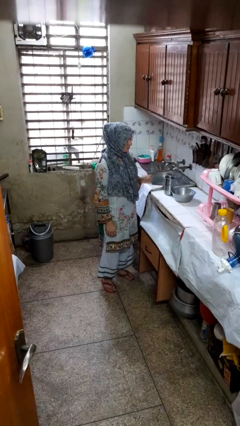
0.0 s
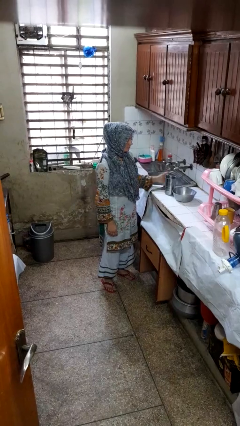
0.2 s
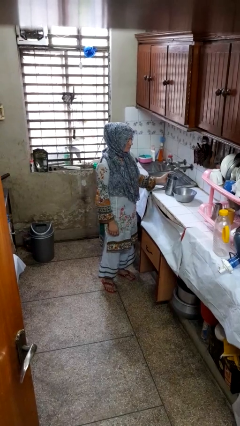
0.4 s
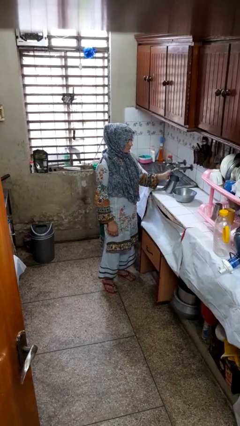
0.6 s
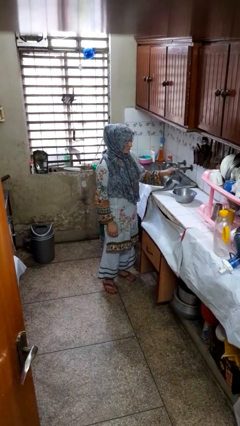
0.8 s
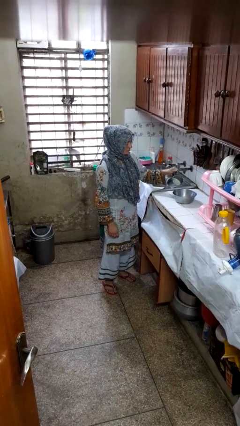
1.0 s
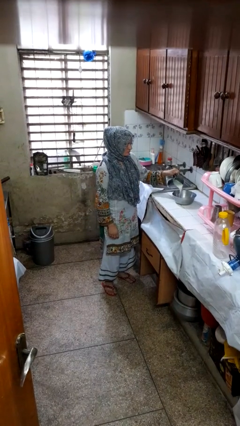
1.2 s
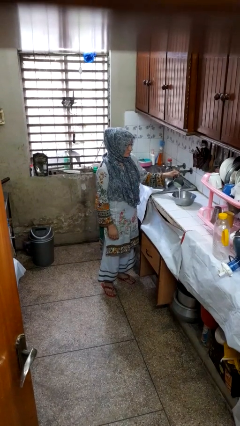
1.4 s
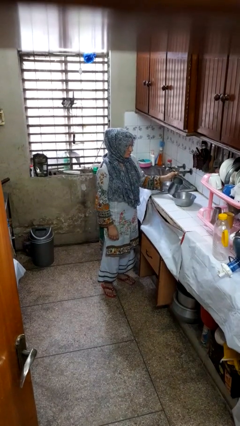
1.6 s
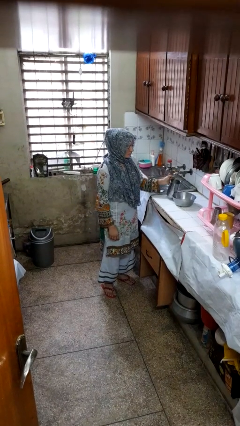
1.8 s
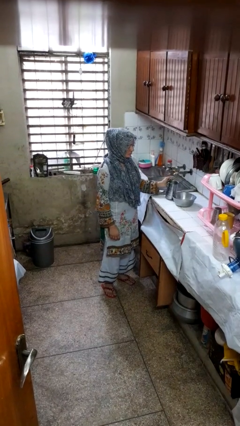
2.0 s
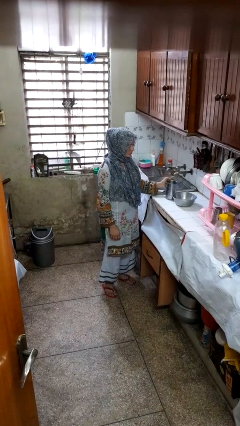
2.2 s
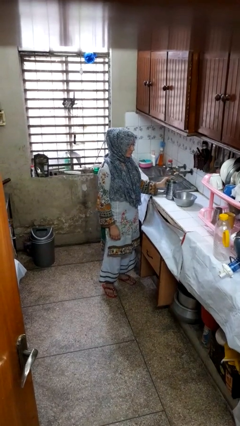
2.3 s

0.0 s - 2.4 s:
person pours into bowl

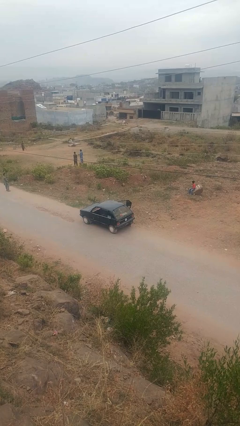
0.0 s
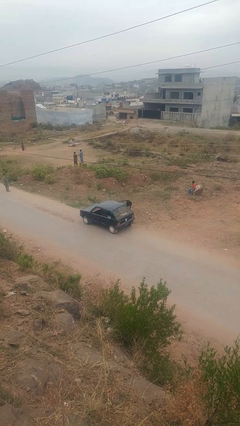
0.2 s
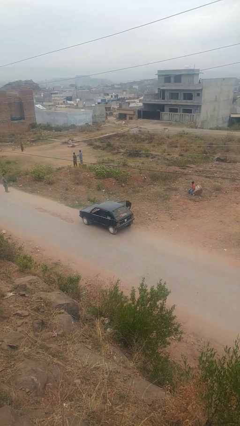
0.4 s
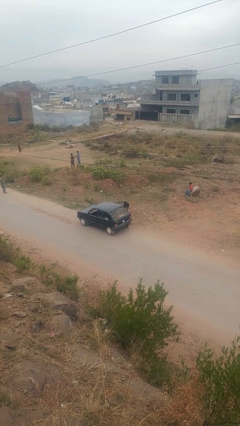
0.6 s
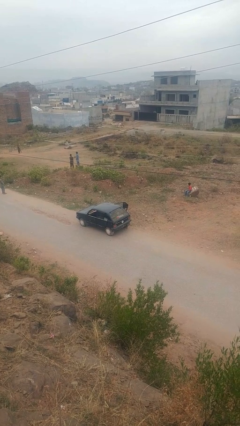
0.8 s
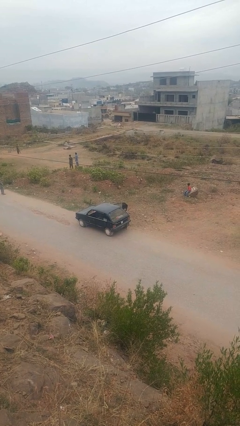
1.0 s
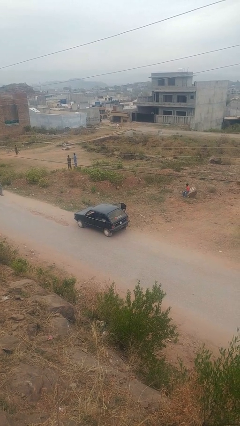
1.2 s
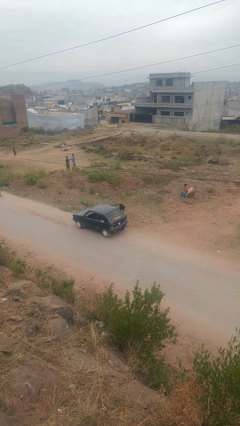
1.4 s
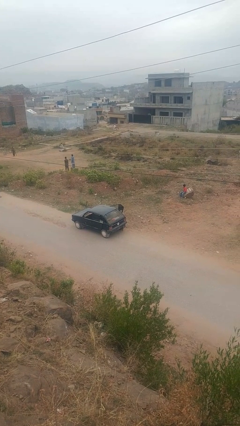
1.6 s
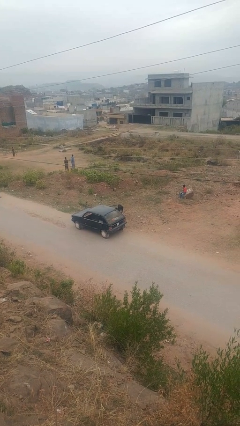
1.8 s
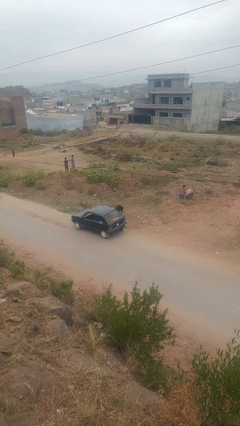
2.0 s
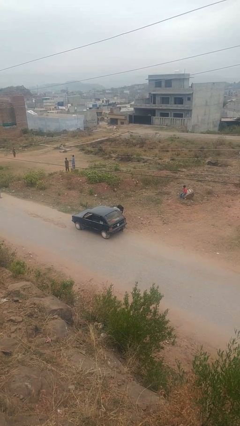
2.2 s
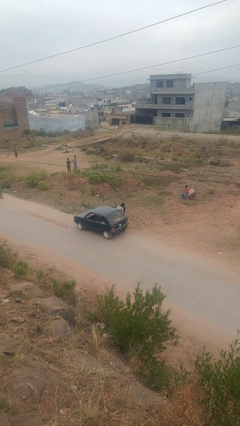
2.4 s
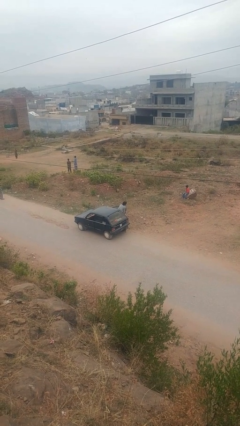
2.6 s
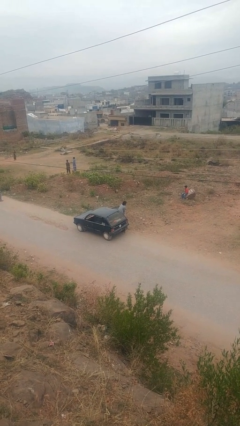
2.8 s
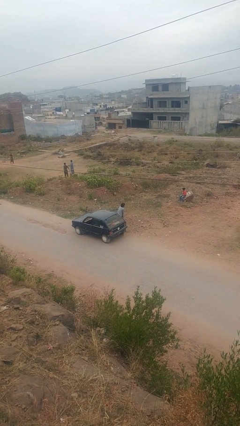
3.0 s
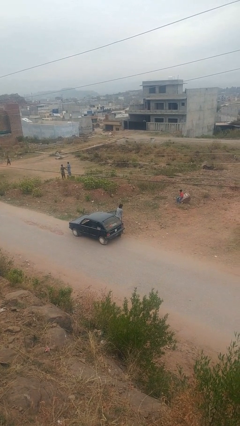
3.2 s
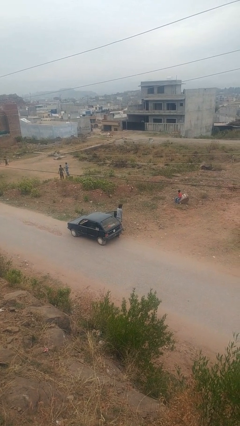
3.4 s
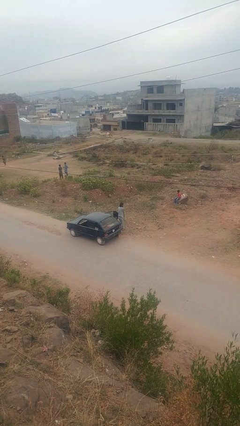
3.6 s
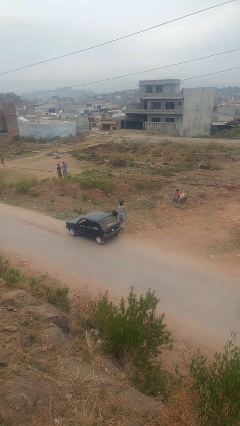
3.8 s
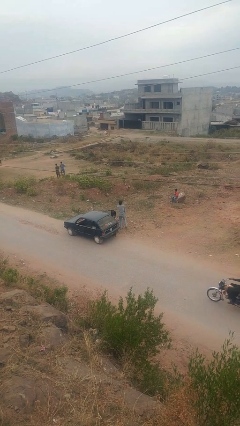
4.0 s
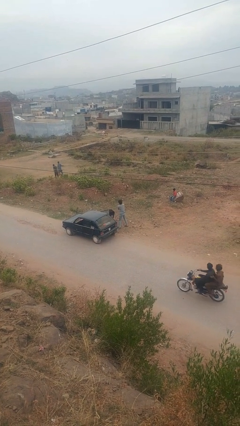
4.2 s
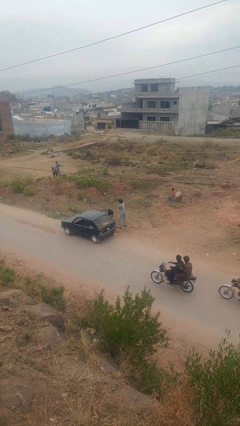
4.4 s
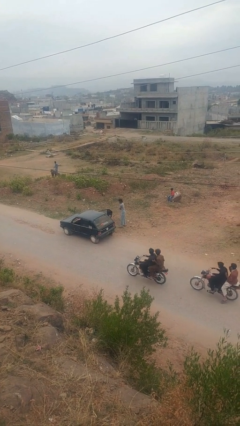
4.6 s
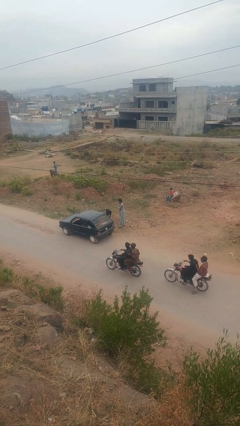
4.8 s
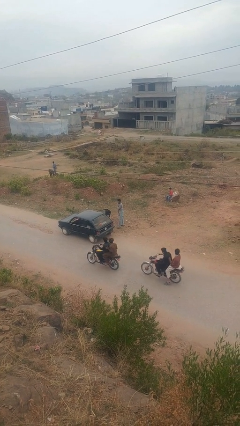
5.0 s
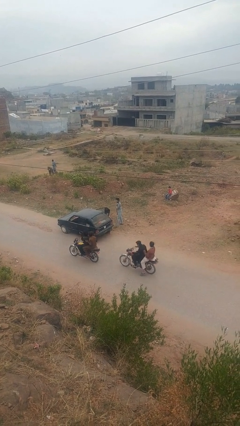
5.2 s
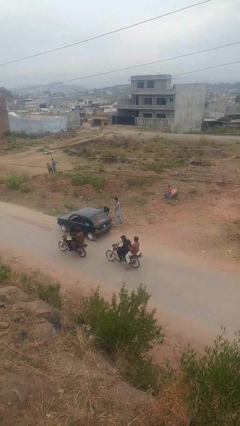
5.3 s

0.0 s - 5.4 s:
person exits car

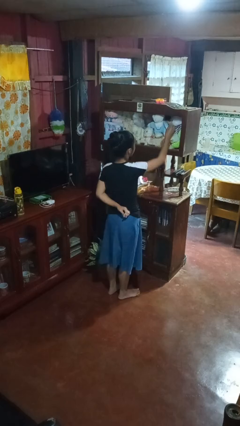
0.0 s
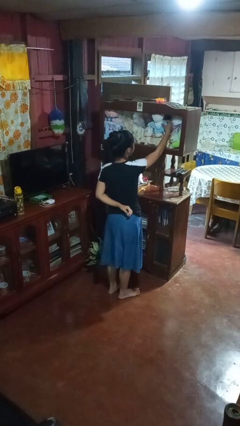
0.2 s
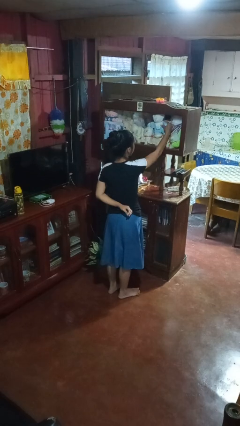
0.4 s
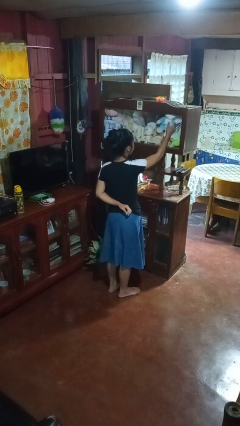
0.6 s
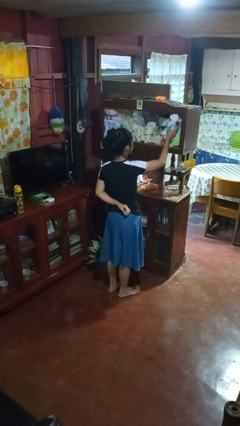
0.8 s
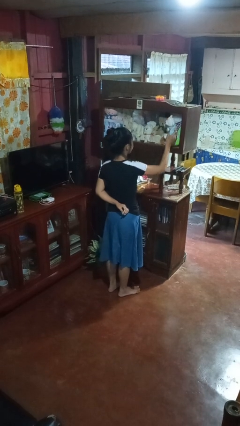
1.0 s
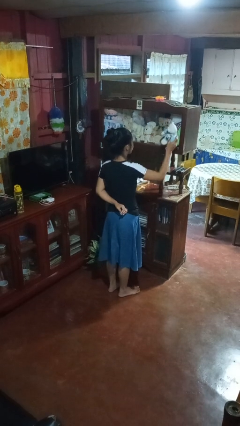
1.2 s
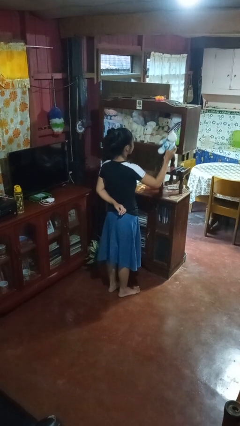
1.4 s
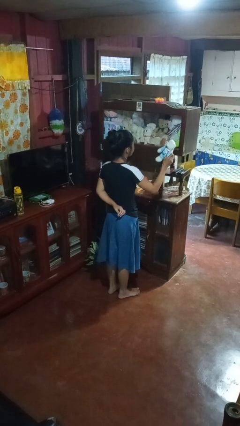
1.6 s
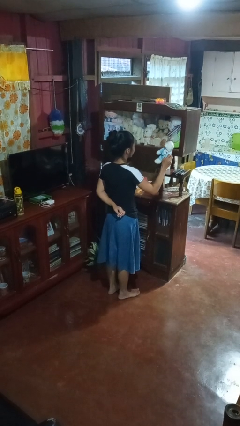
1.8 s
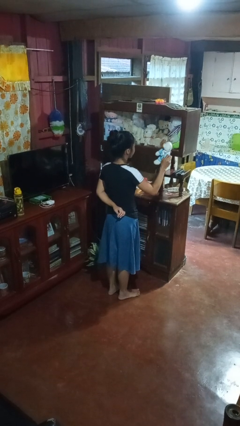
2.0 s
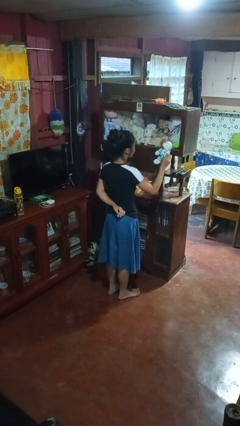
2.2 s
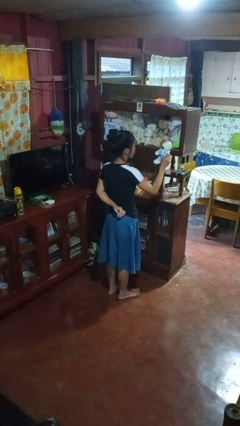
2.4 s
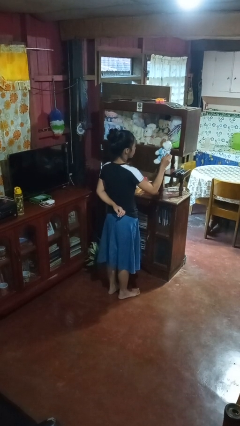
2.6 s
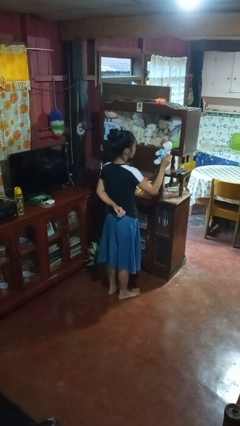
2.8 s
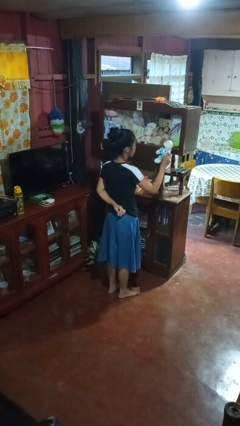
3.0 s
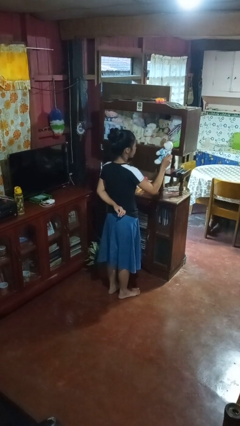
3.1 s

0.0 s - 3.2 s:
person picks up object from shelf

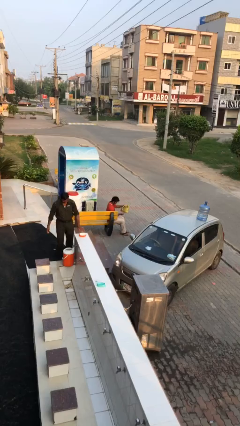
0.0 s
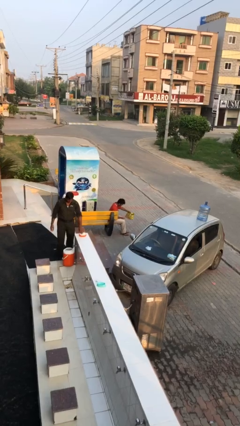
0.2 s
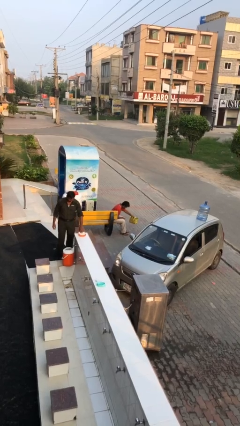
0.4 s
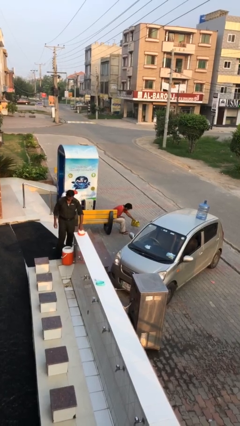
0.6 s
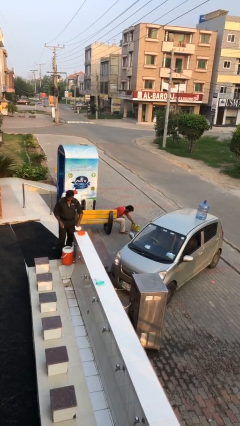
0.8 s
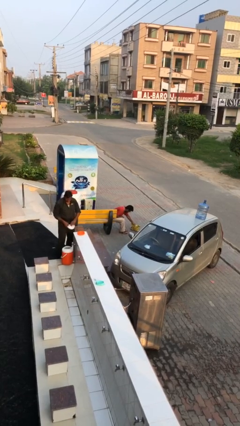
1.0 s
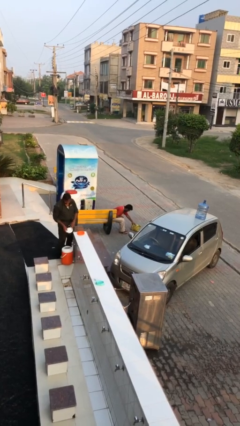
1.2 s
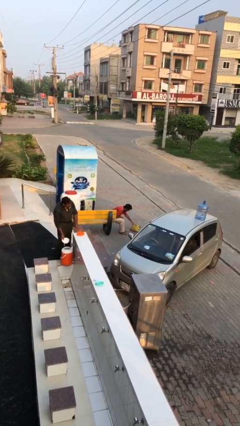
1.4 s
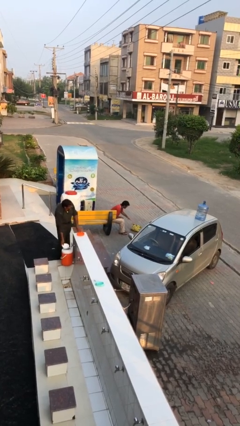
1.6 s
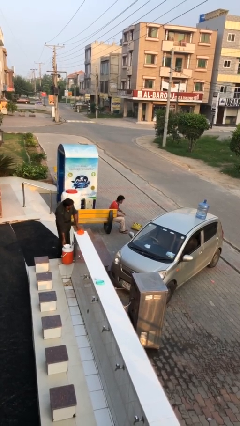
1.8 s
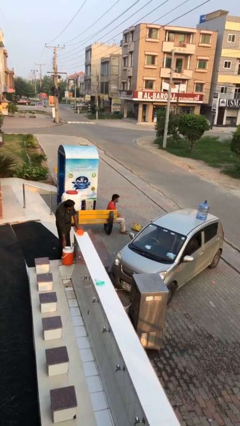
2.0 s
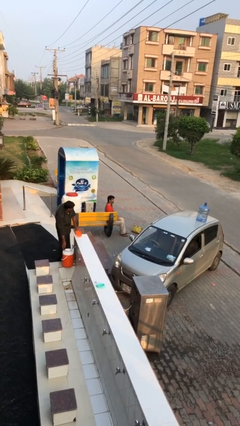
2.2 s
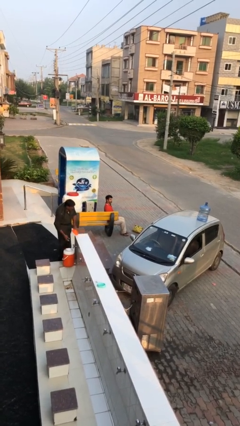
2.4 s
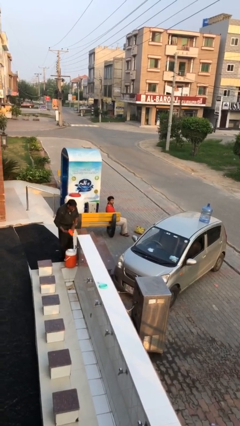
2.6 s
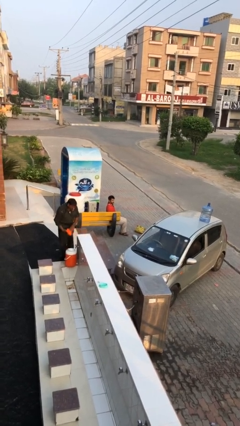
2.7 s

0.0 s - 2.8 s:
person puts down object on floor

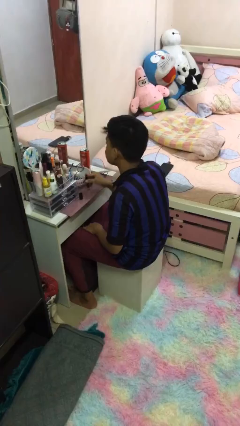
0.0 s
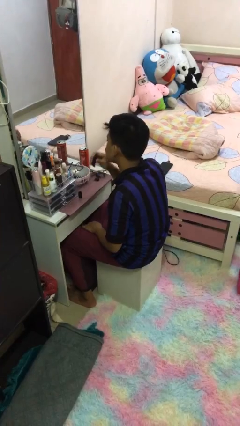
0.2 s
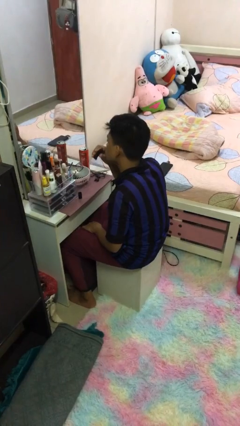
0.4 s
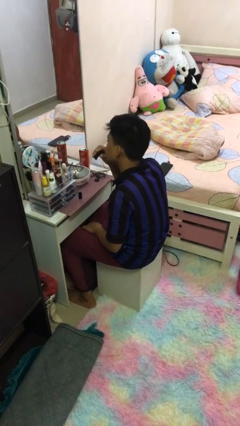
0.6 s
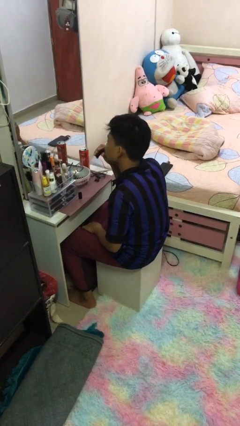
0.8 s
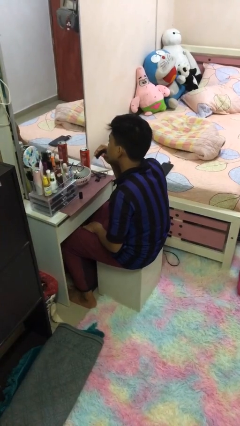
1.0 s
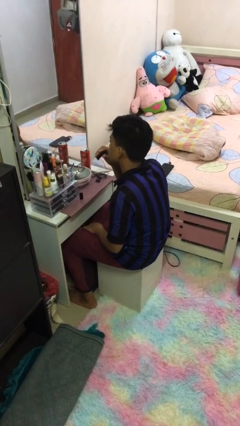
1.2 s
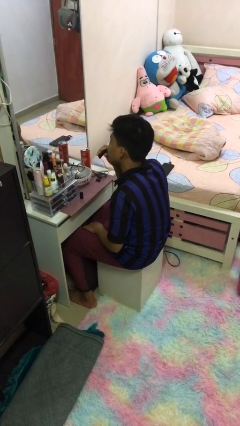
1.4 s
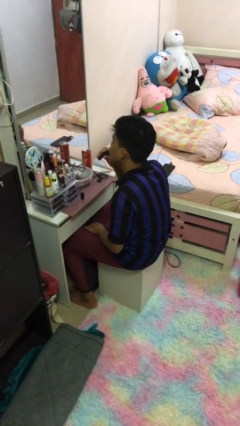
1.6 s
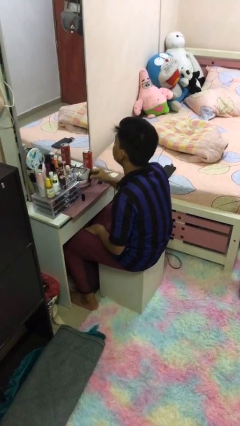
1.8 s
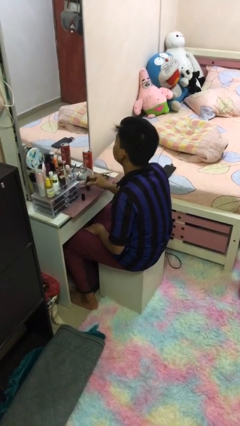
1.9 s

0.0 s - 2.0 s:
person applies lip makeup

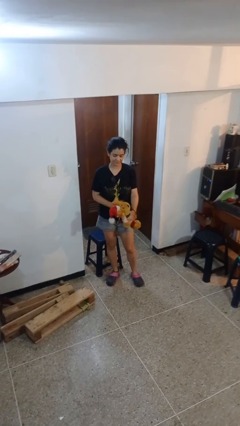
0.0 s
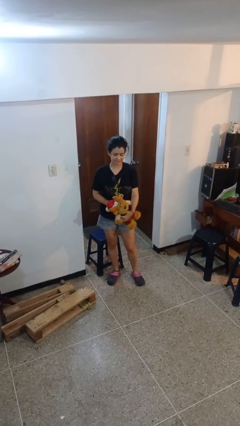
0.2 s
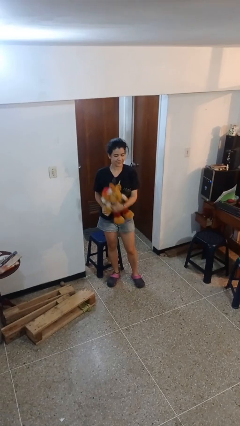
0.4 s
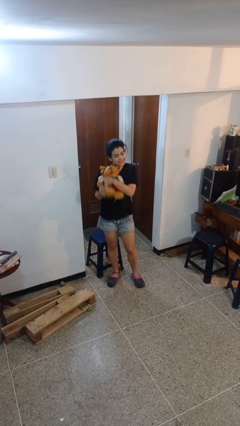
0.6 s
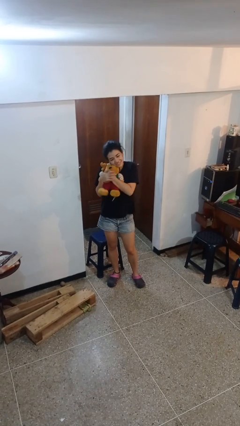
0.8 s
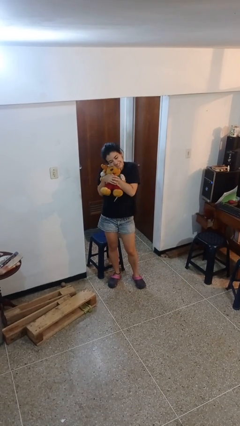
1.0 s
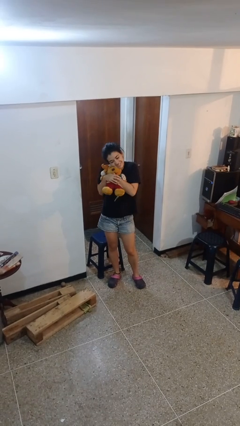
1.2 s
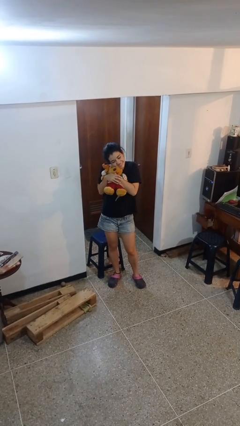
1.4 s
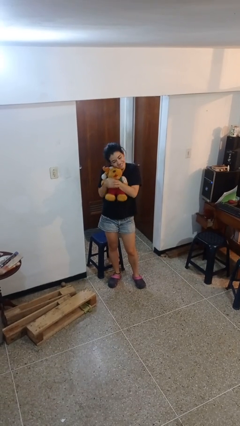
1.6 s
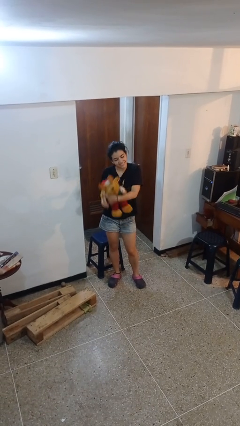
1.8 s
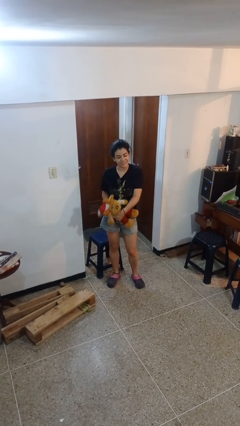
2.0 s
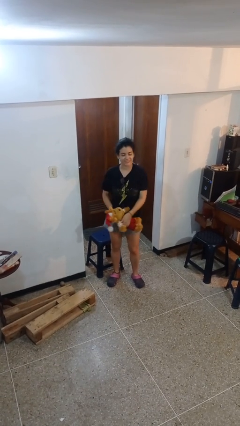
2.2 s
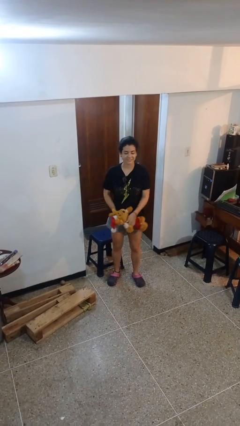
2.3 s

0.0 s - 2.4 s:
person hugs stuffed animal
